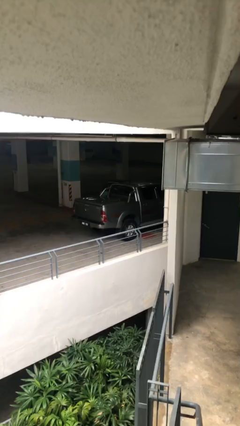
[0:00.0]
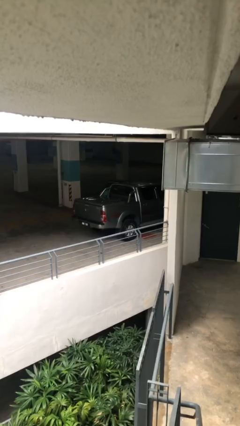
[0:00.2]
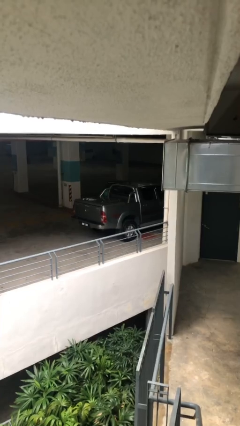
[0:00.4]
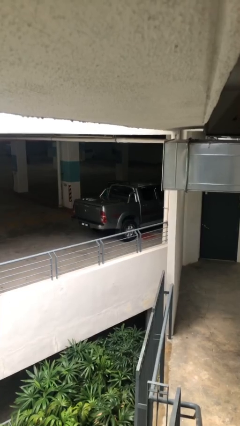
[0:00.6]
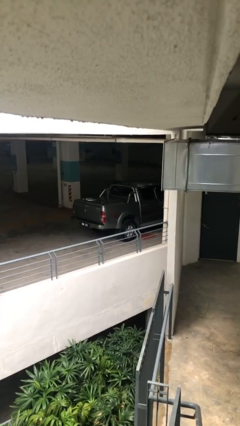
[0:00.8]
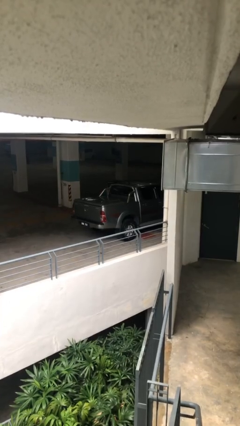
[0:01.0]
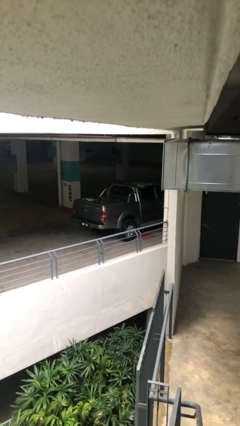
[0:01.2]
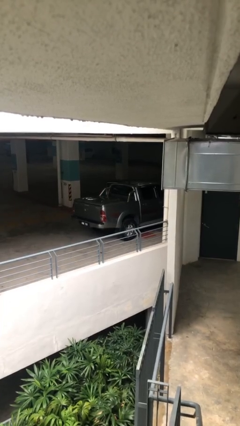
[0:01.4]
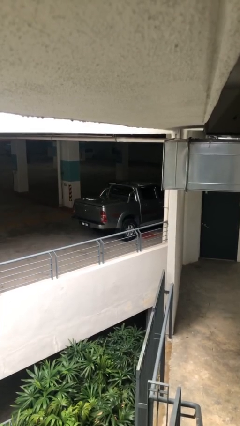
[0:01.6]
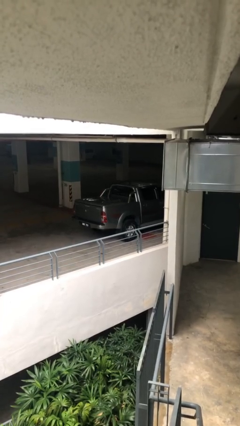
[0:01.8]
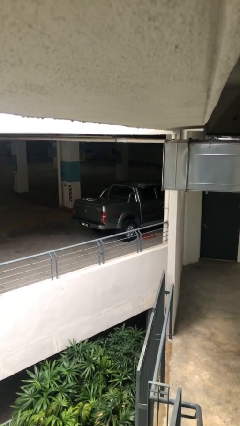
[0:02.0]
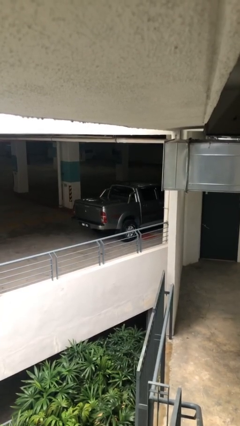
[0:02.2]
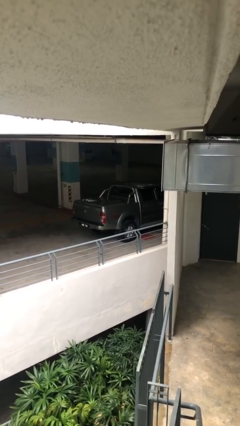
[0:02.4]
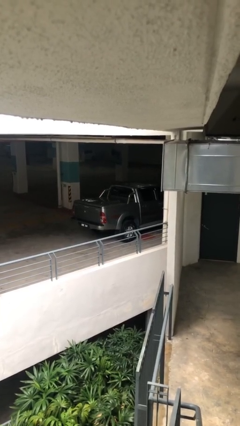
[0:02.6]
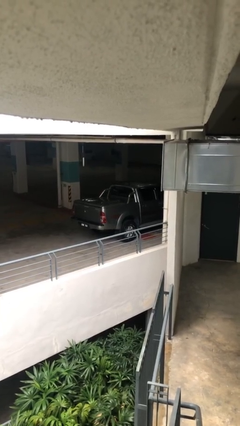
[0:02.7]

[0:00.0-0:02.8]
car picks up person

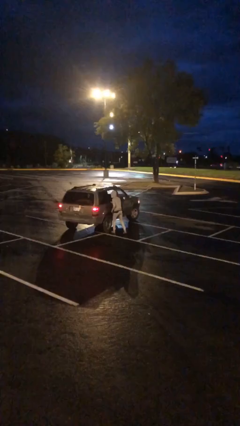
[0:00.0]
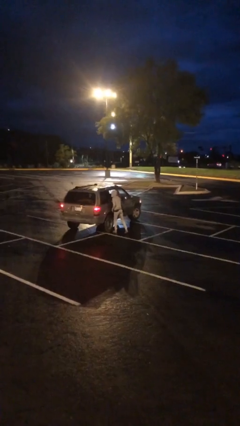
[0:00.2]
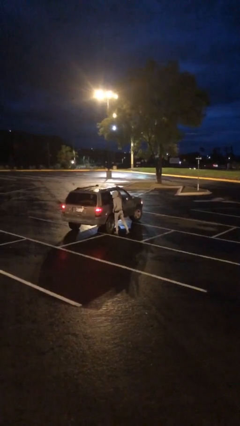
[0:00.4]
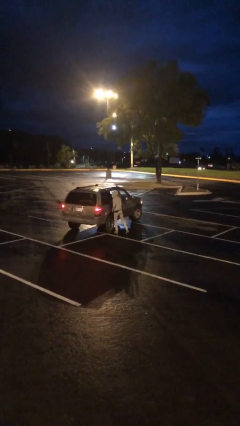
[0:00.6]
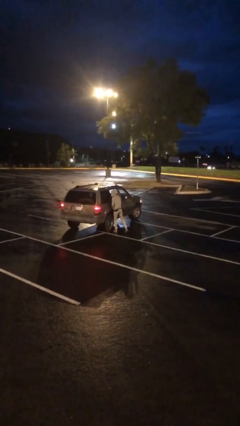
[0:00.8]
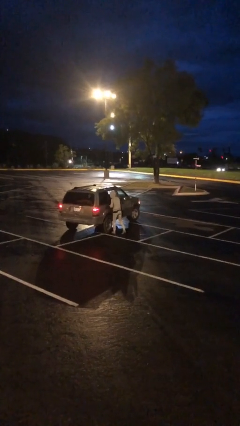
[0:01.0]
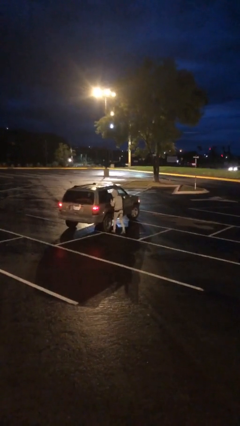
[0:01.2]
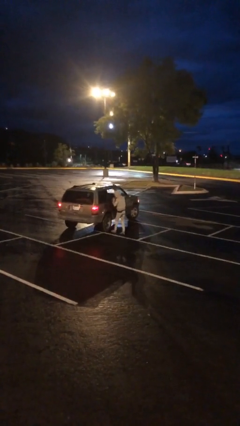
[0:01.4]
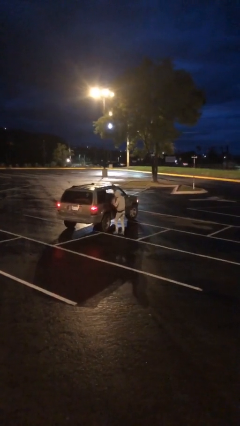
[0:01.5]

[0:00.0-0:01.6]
person unloads car

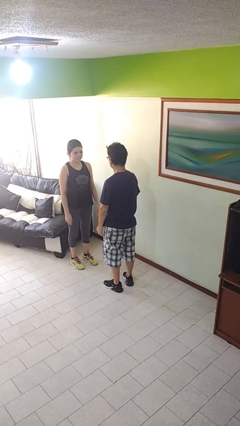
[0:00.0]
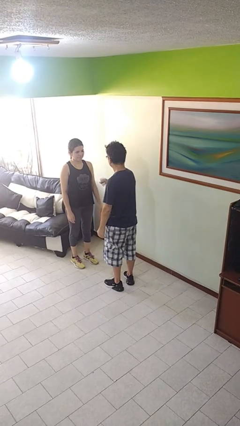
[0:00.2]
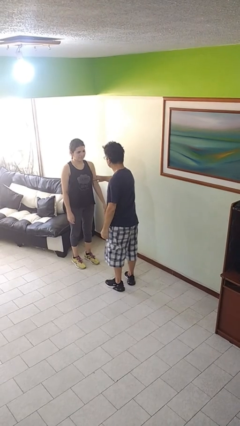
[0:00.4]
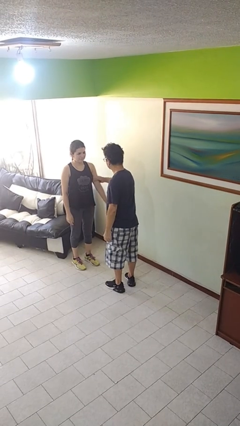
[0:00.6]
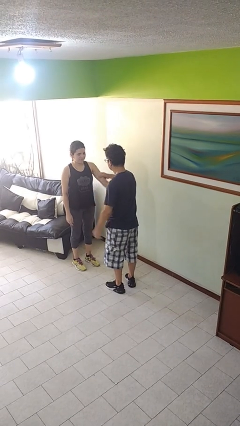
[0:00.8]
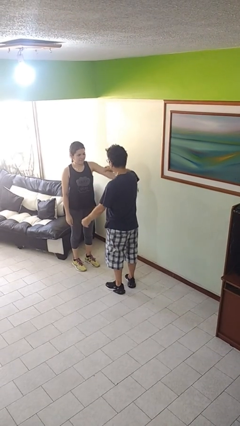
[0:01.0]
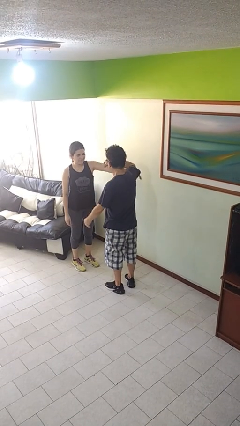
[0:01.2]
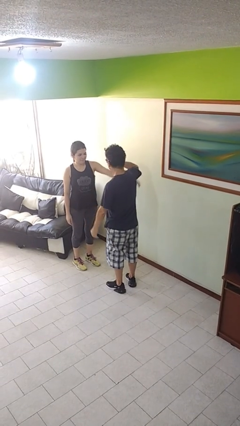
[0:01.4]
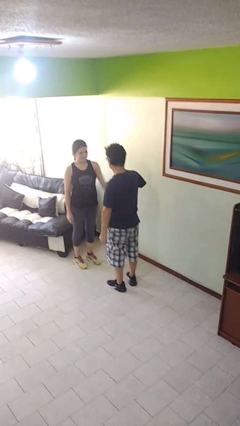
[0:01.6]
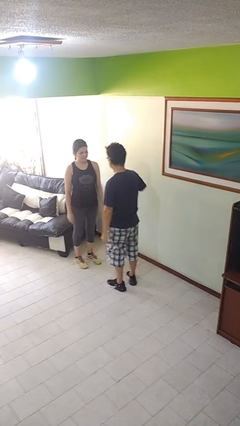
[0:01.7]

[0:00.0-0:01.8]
person grabs person by bicep

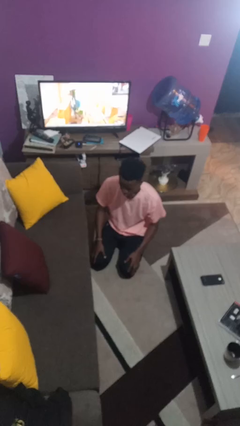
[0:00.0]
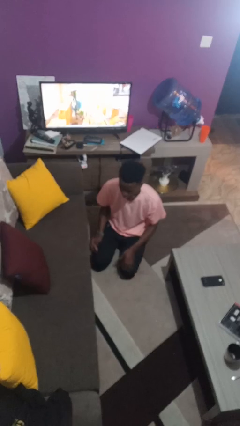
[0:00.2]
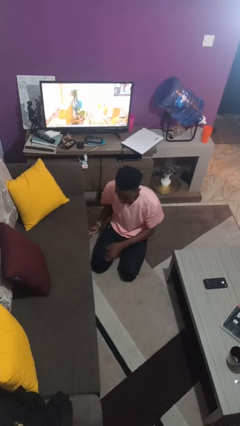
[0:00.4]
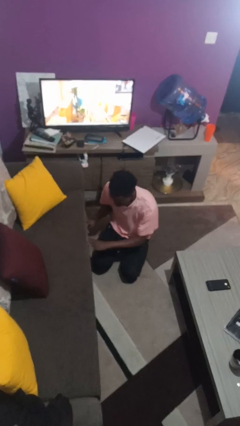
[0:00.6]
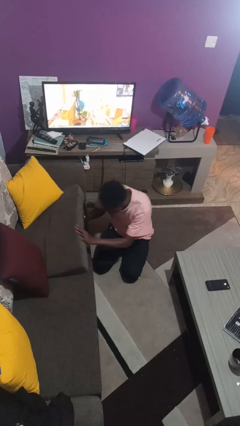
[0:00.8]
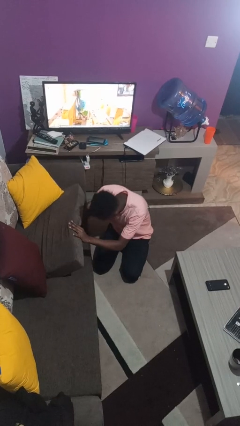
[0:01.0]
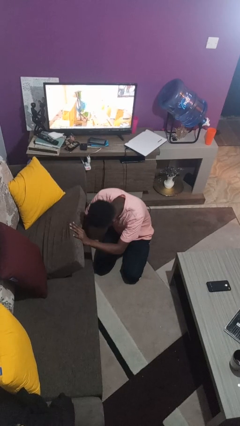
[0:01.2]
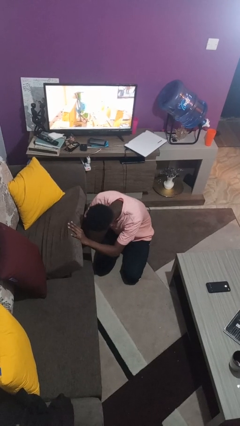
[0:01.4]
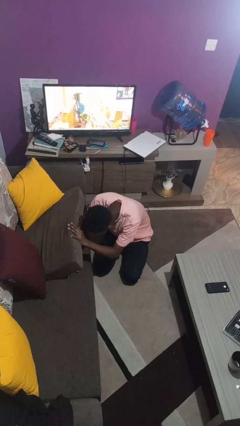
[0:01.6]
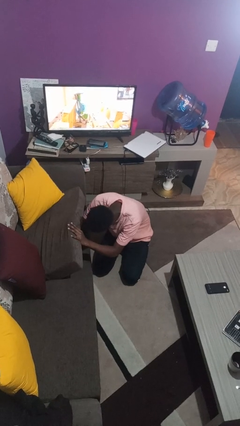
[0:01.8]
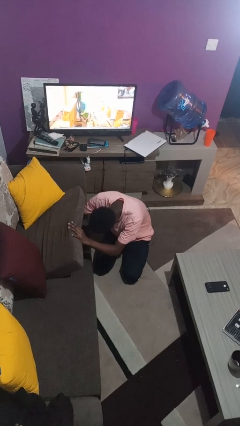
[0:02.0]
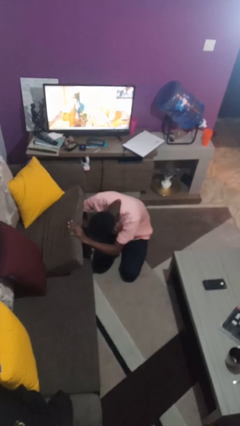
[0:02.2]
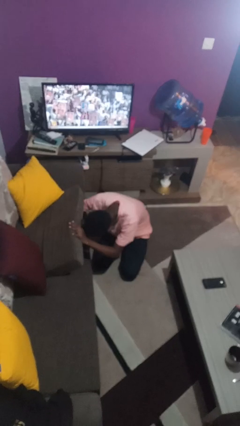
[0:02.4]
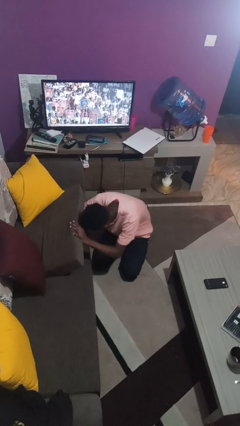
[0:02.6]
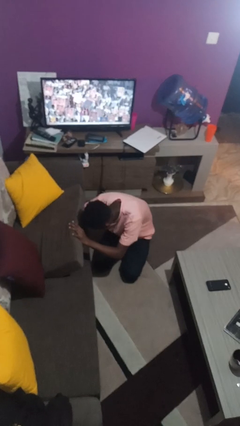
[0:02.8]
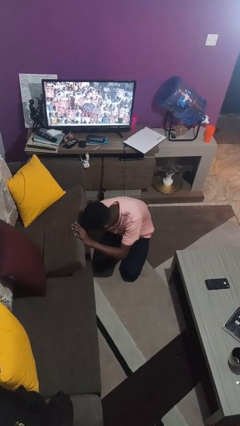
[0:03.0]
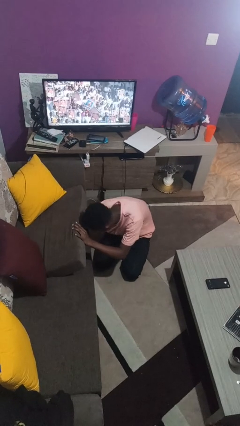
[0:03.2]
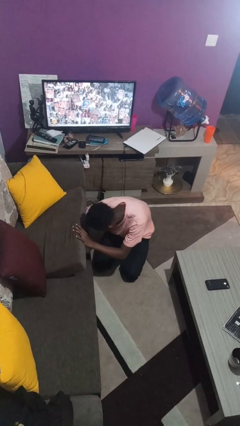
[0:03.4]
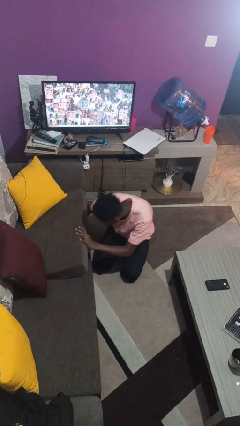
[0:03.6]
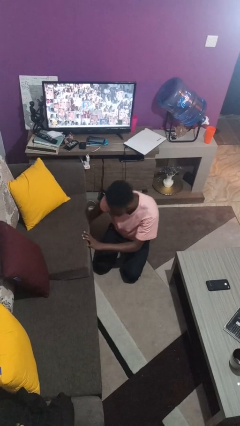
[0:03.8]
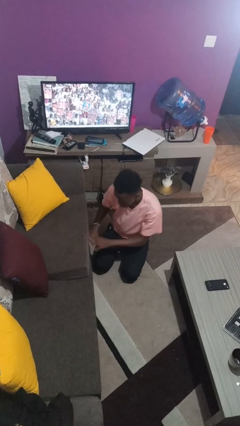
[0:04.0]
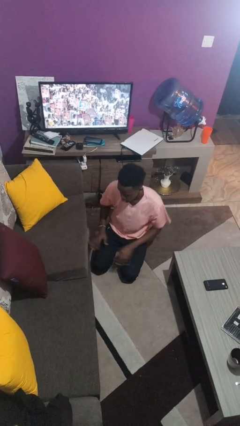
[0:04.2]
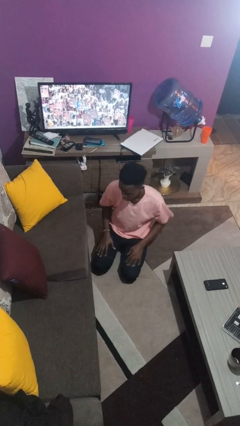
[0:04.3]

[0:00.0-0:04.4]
person searches under couch

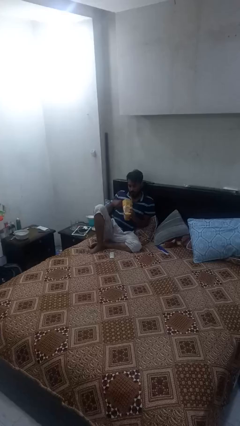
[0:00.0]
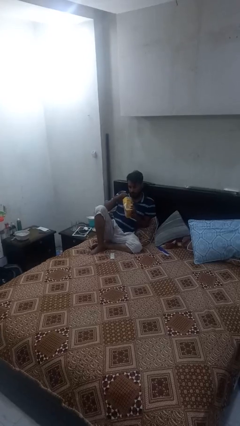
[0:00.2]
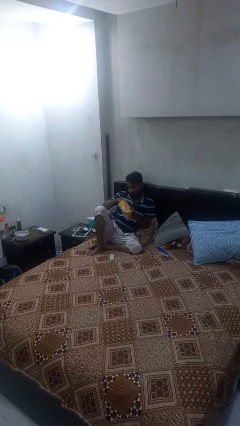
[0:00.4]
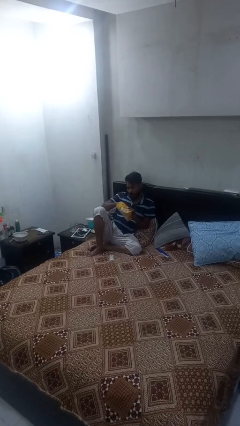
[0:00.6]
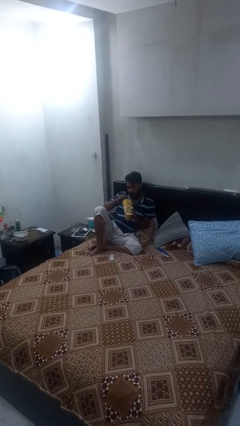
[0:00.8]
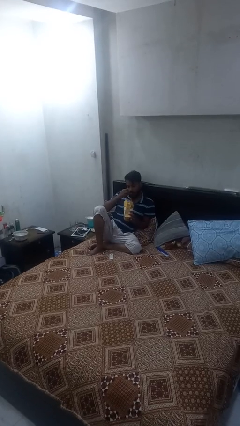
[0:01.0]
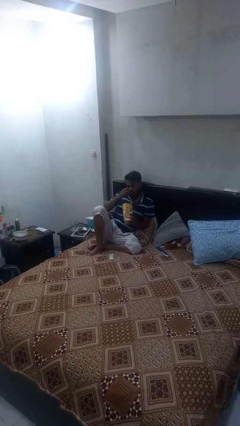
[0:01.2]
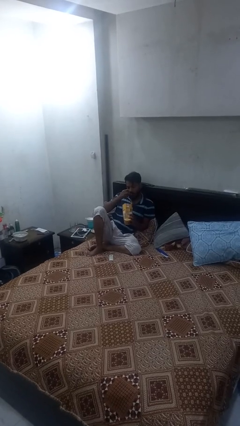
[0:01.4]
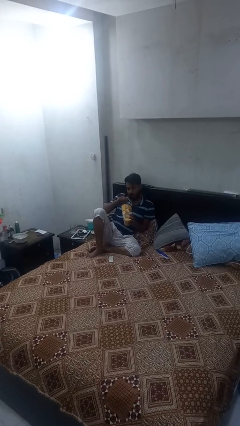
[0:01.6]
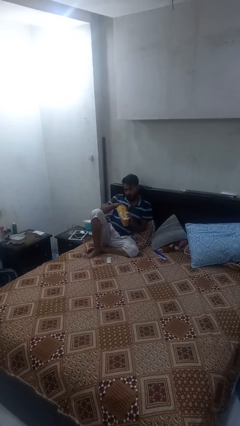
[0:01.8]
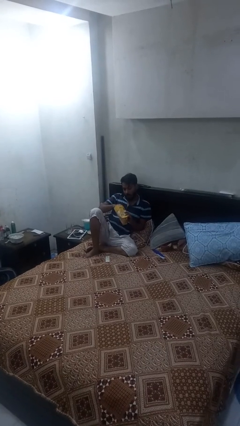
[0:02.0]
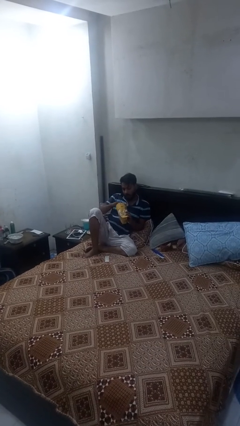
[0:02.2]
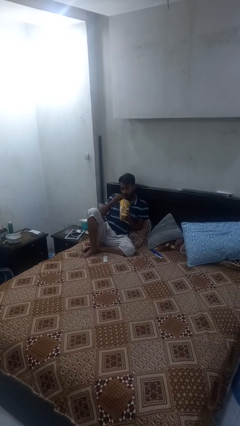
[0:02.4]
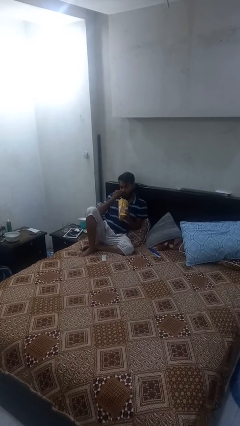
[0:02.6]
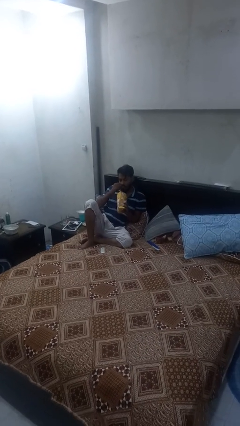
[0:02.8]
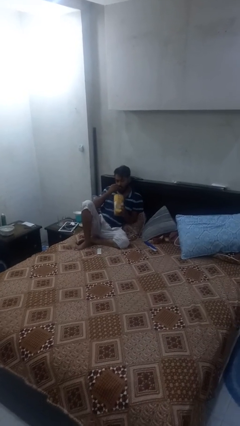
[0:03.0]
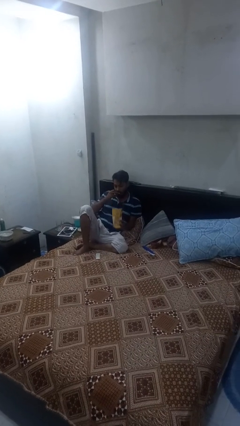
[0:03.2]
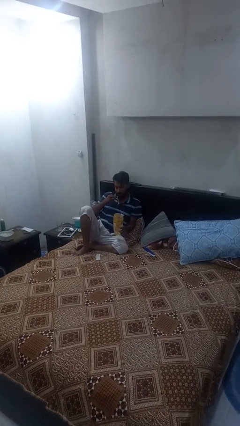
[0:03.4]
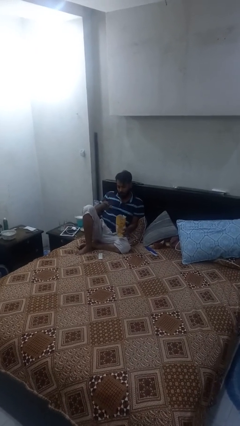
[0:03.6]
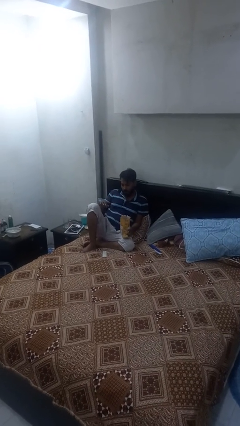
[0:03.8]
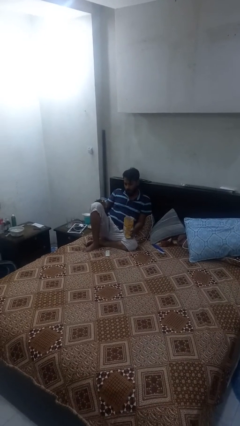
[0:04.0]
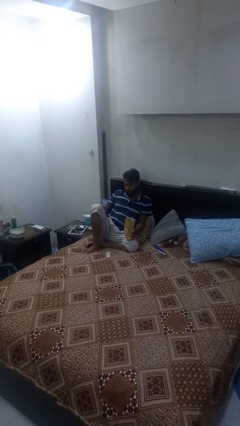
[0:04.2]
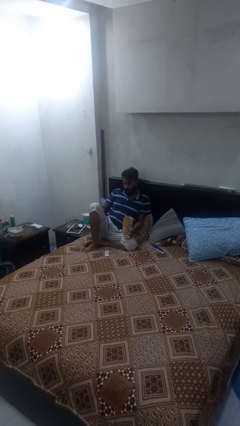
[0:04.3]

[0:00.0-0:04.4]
person eats snack from bag

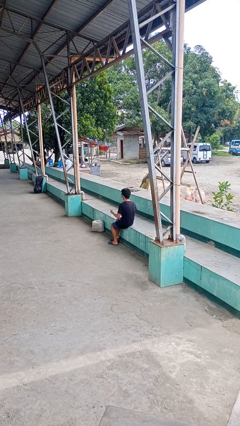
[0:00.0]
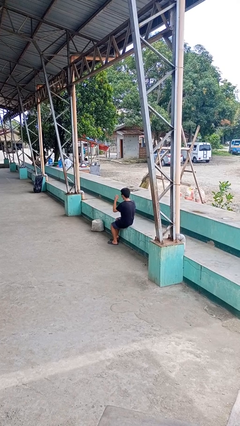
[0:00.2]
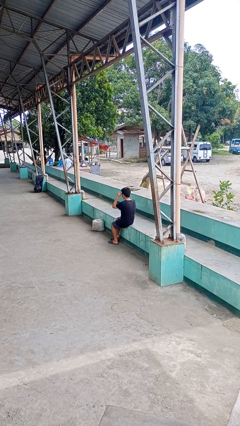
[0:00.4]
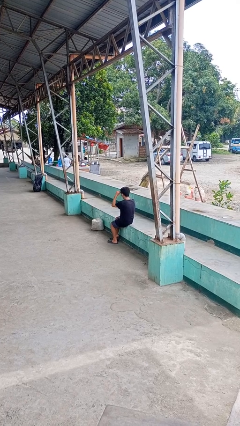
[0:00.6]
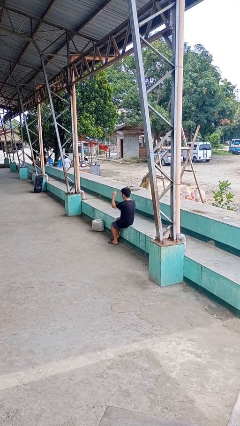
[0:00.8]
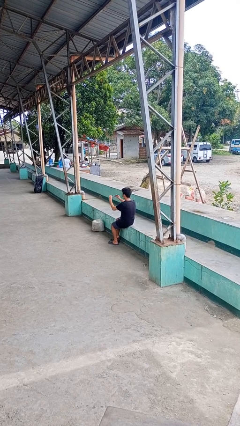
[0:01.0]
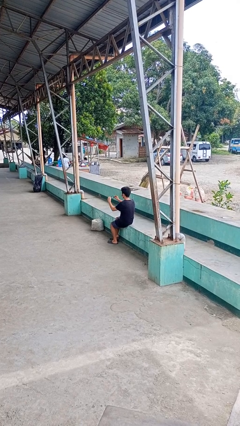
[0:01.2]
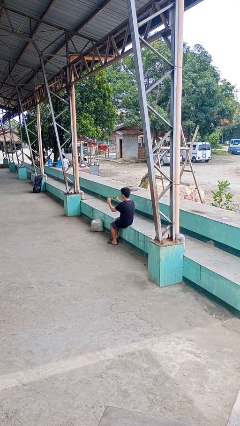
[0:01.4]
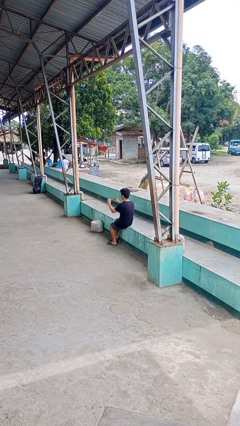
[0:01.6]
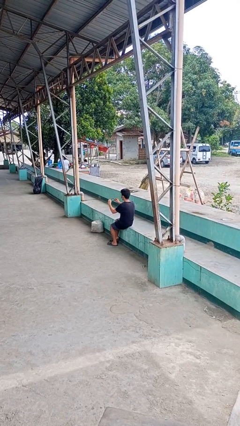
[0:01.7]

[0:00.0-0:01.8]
person takes off sunglasses

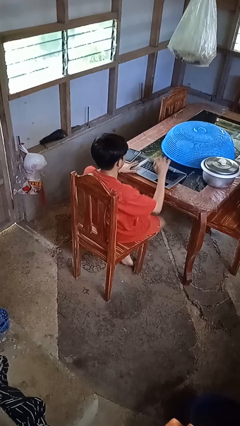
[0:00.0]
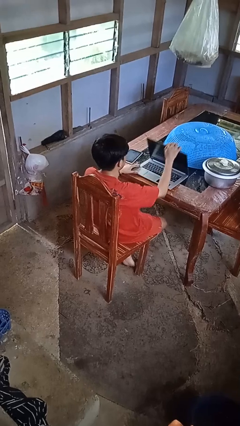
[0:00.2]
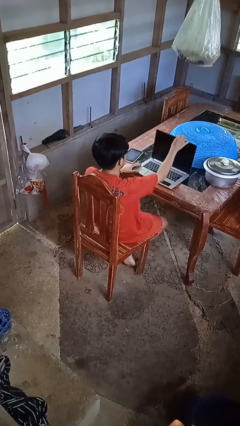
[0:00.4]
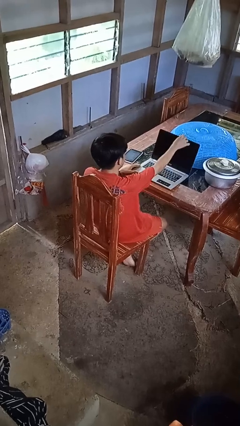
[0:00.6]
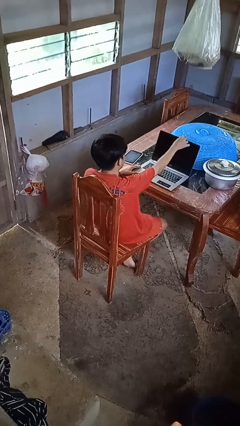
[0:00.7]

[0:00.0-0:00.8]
person opens laptop
